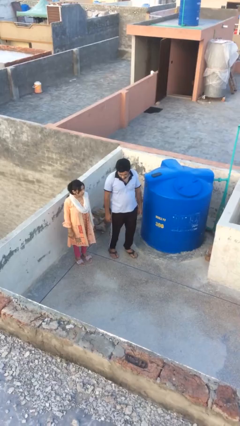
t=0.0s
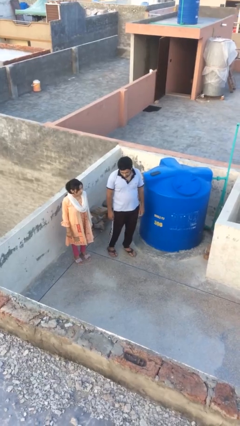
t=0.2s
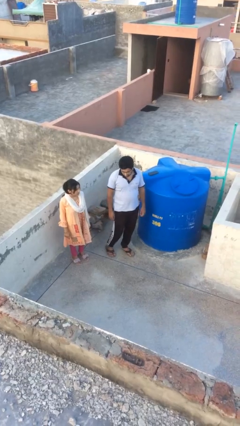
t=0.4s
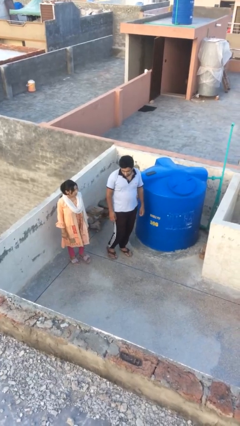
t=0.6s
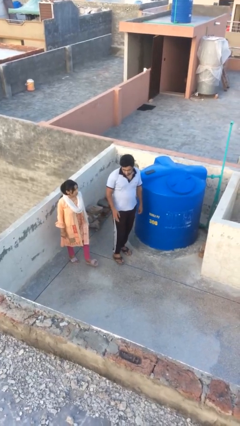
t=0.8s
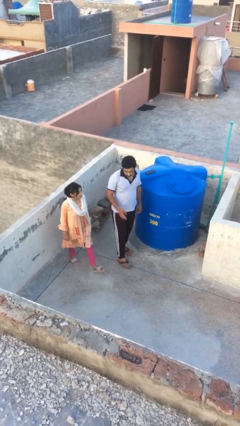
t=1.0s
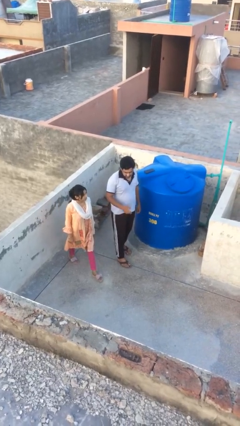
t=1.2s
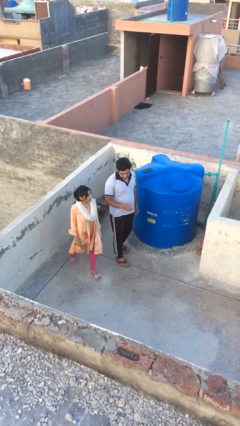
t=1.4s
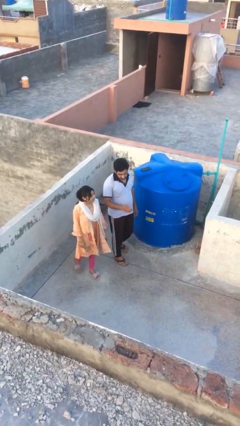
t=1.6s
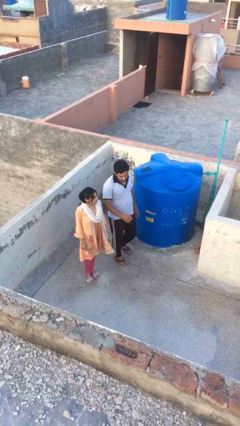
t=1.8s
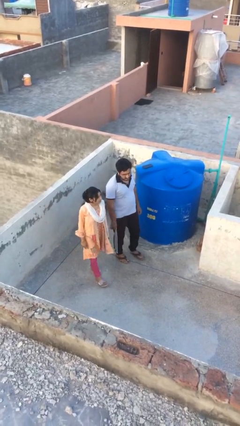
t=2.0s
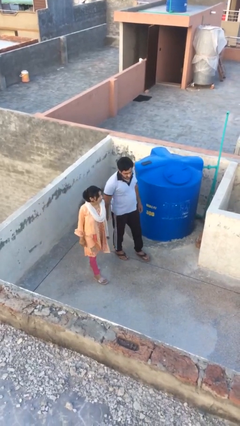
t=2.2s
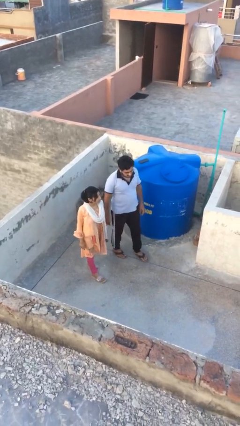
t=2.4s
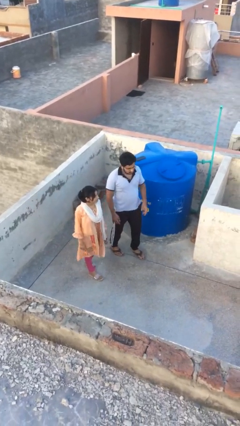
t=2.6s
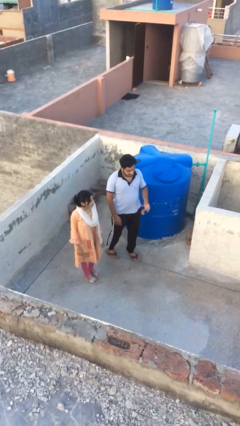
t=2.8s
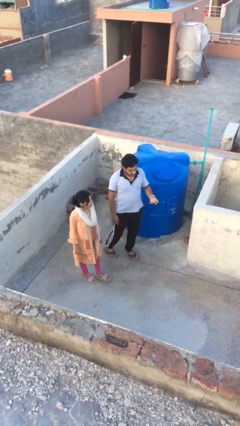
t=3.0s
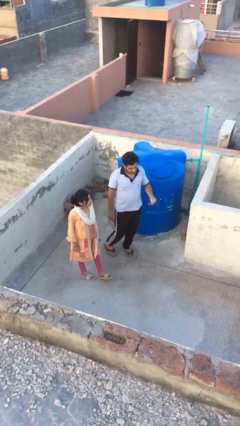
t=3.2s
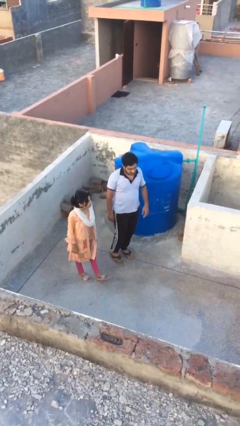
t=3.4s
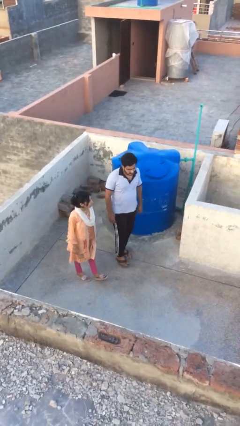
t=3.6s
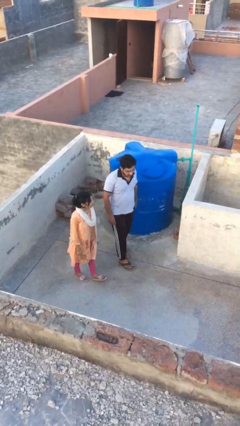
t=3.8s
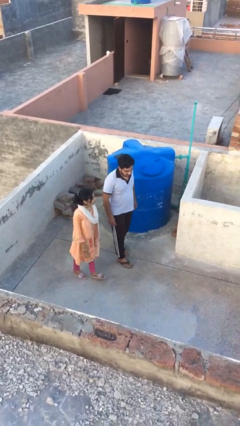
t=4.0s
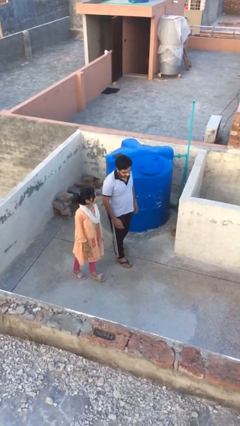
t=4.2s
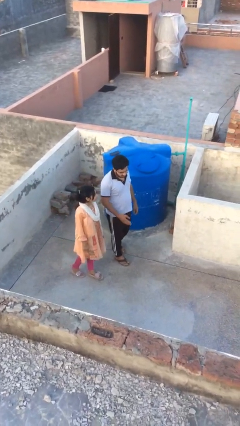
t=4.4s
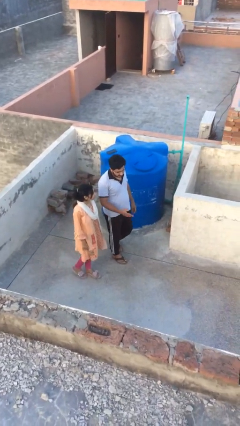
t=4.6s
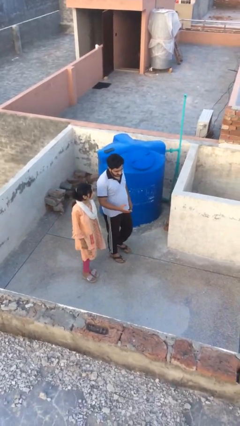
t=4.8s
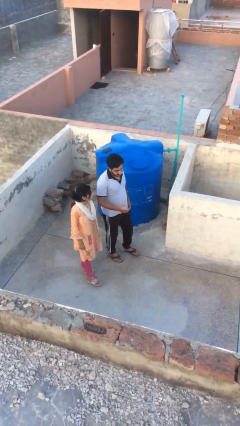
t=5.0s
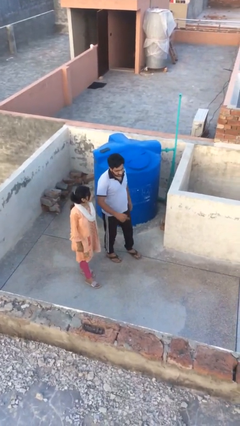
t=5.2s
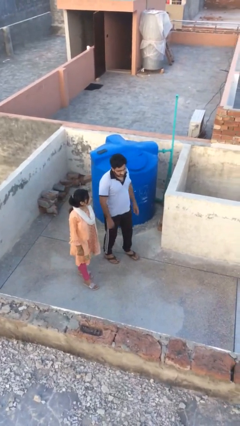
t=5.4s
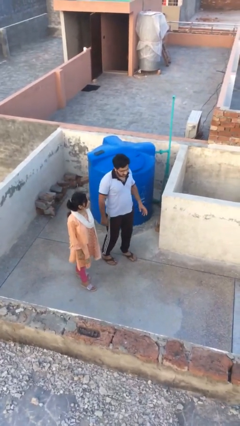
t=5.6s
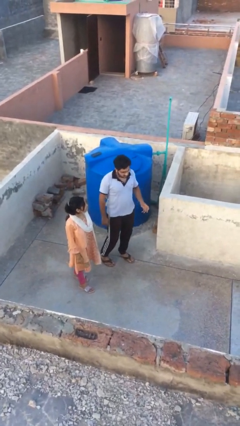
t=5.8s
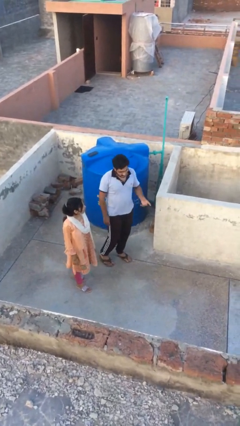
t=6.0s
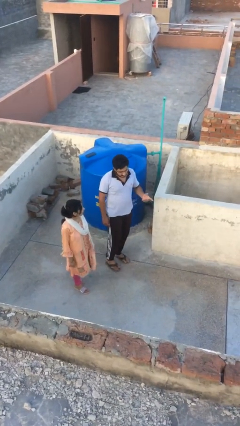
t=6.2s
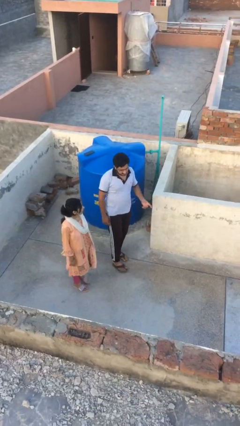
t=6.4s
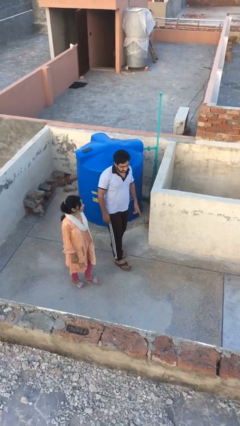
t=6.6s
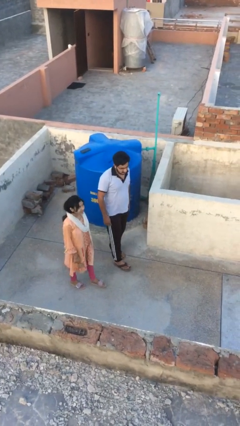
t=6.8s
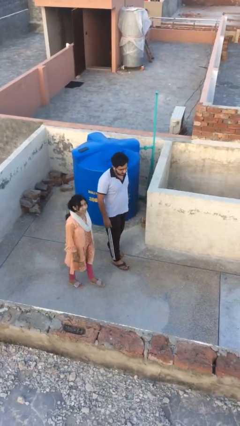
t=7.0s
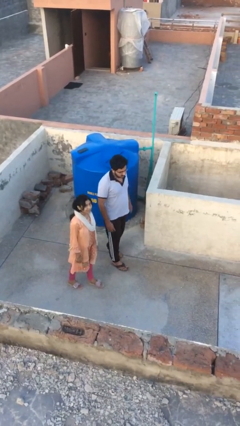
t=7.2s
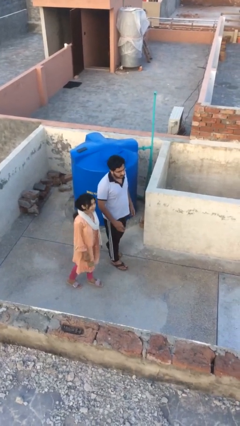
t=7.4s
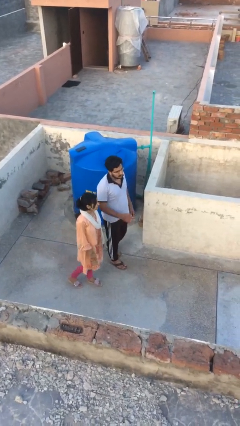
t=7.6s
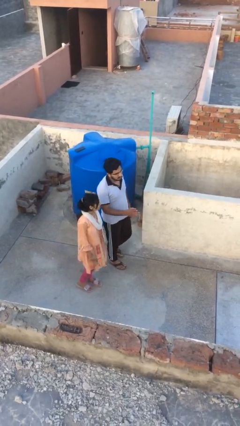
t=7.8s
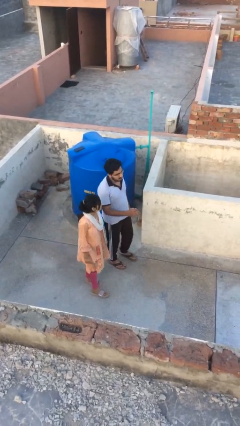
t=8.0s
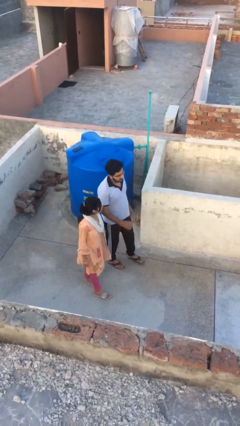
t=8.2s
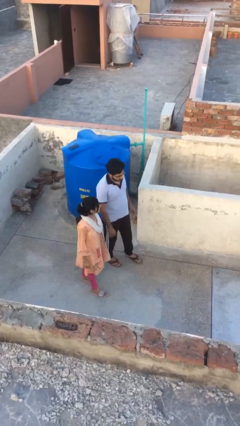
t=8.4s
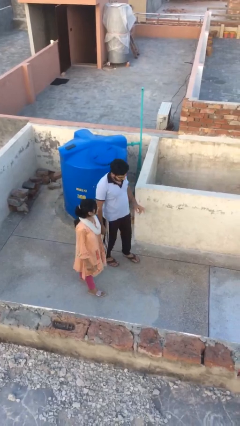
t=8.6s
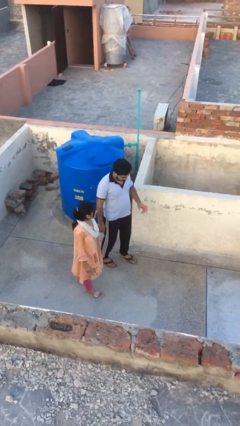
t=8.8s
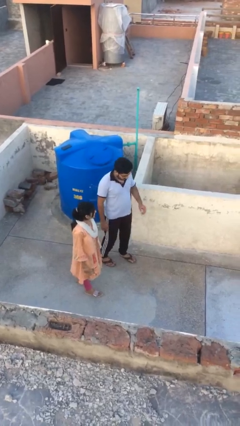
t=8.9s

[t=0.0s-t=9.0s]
person talks to person

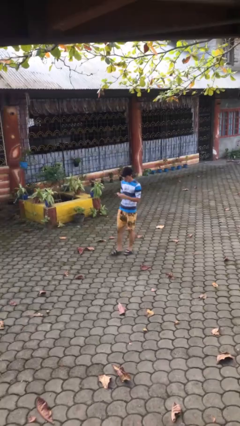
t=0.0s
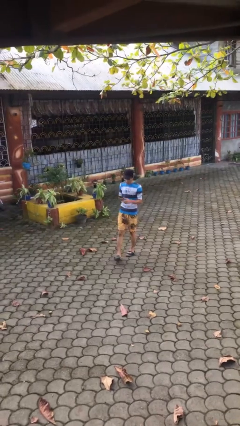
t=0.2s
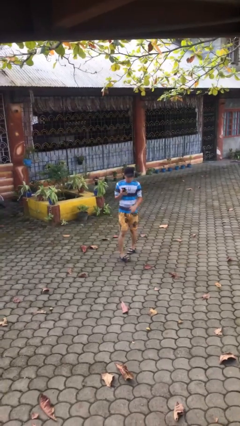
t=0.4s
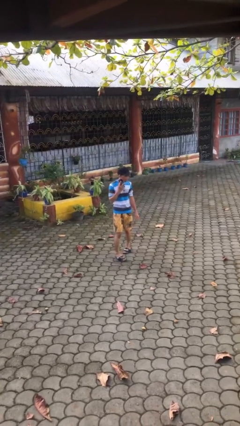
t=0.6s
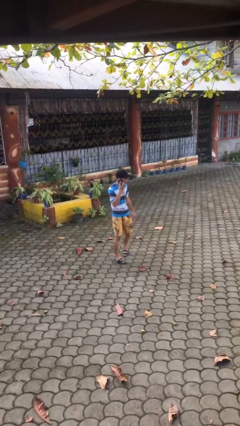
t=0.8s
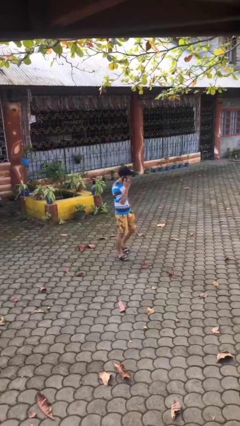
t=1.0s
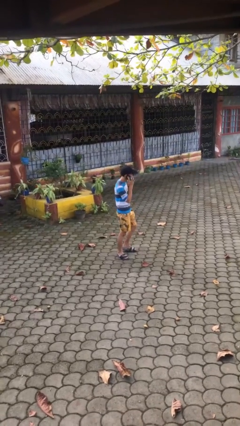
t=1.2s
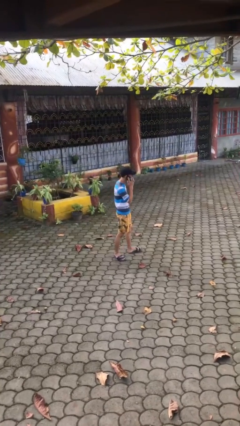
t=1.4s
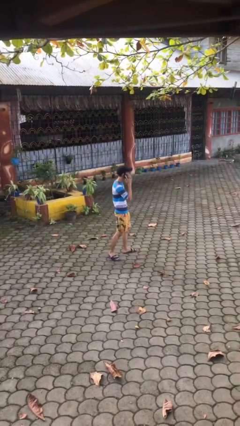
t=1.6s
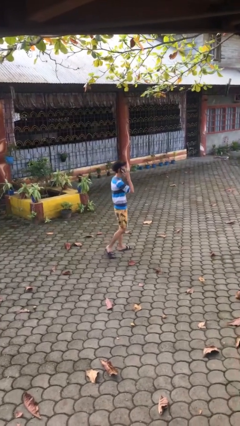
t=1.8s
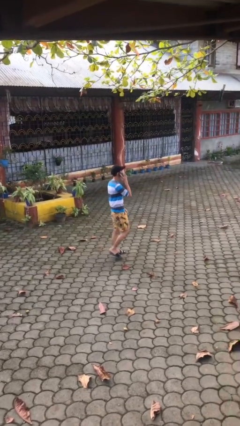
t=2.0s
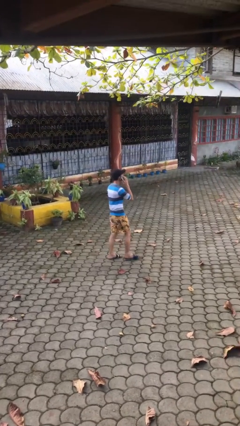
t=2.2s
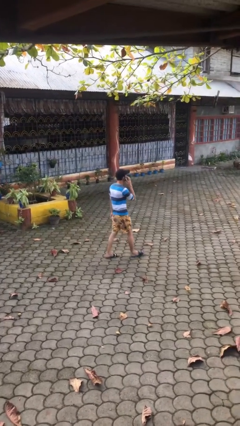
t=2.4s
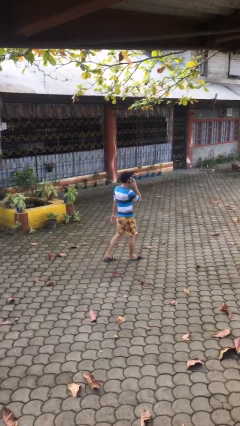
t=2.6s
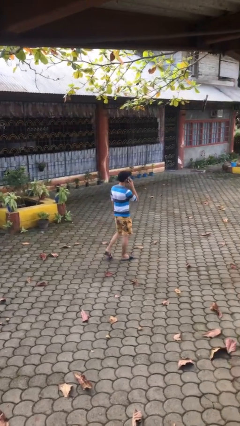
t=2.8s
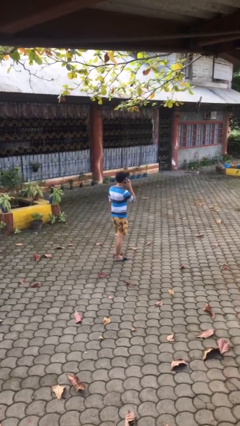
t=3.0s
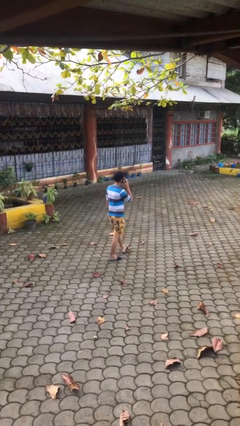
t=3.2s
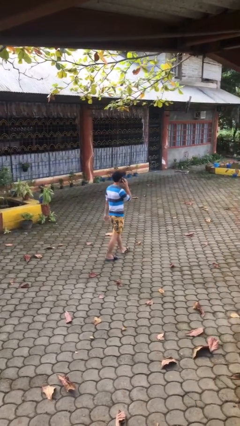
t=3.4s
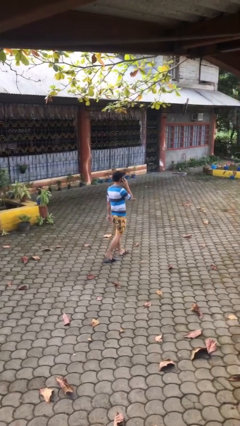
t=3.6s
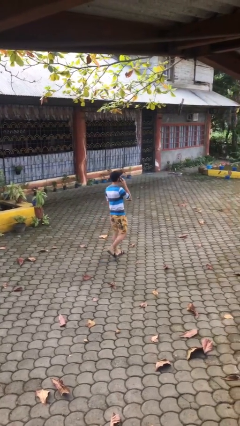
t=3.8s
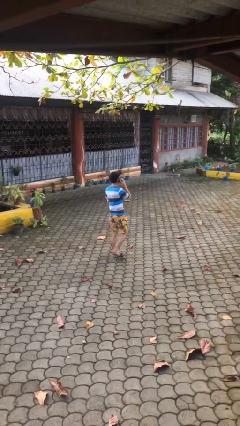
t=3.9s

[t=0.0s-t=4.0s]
person talks on phone

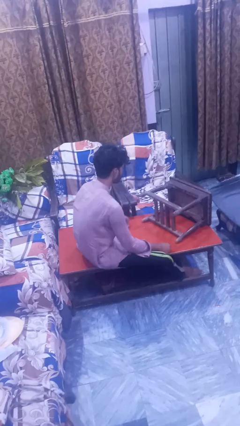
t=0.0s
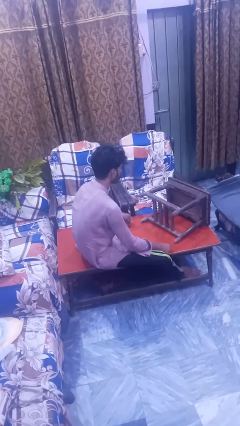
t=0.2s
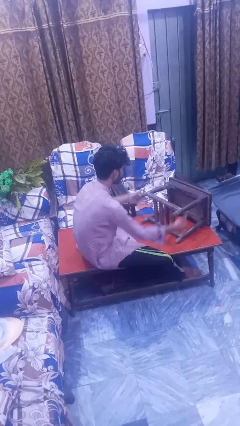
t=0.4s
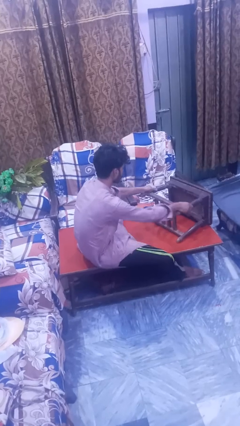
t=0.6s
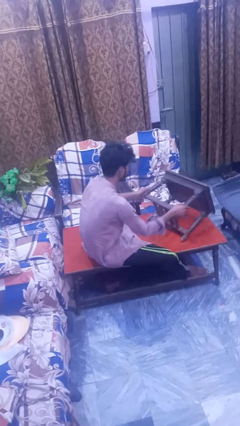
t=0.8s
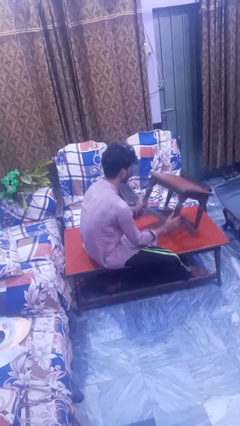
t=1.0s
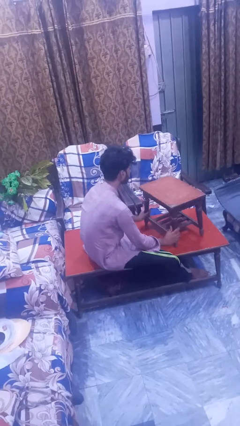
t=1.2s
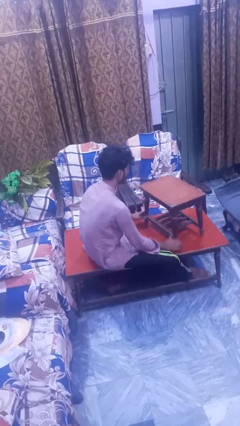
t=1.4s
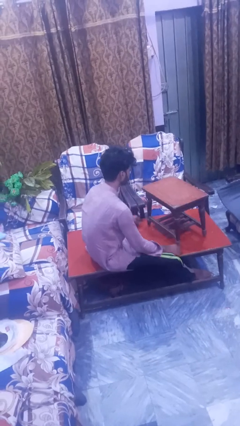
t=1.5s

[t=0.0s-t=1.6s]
person sets upright furniture

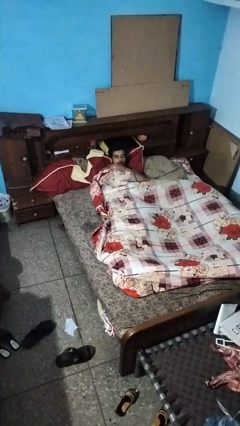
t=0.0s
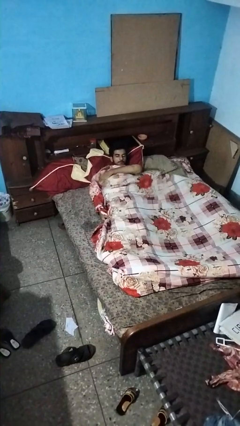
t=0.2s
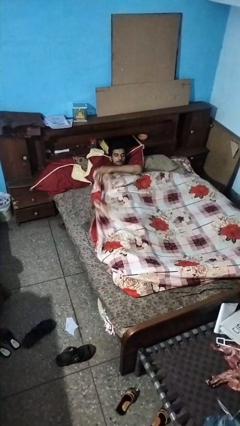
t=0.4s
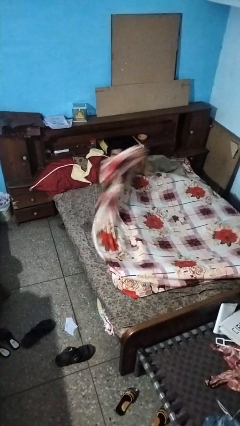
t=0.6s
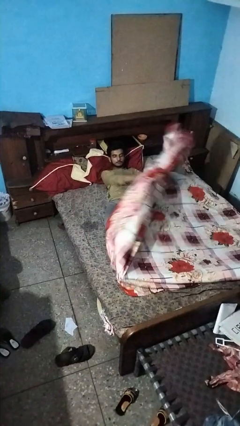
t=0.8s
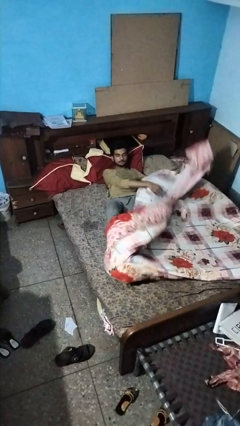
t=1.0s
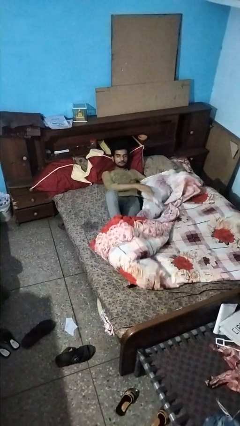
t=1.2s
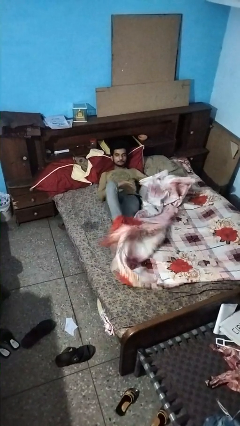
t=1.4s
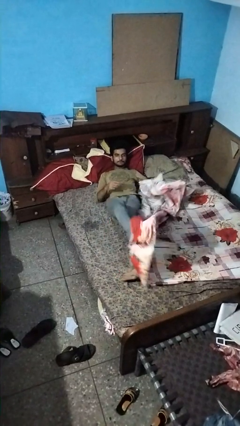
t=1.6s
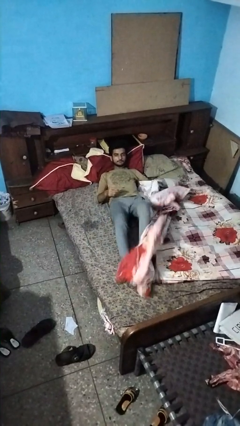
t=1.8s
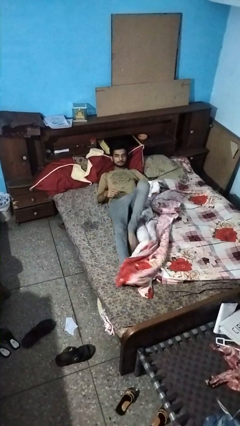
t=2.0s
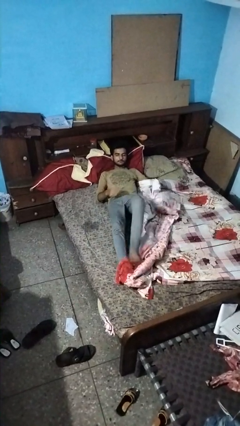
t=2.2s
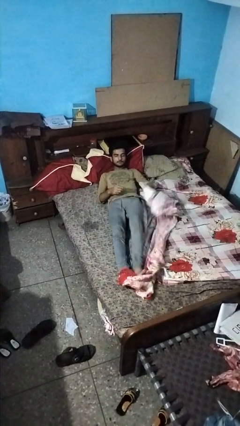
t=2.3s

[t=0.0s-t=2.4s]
person uncovers with bedsheets

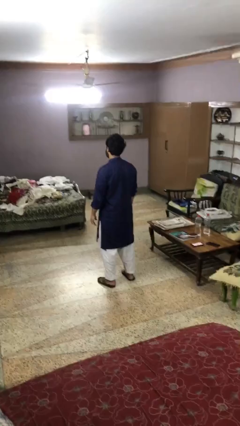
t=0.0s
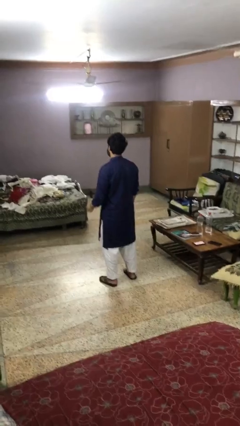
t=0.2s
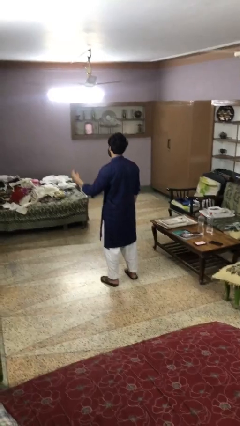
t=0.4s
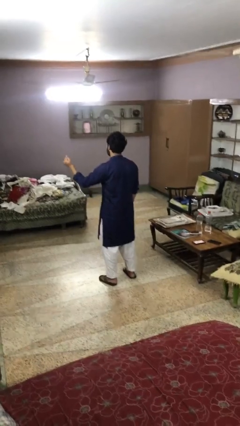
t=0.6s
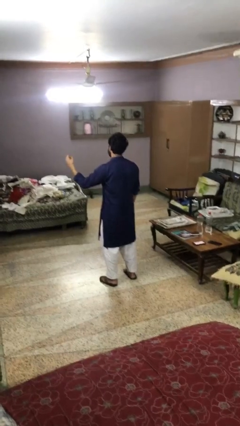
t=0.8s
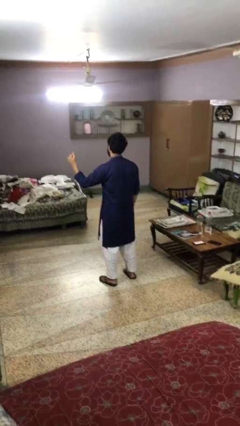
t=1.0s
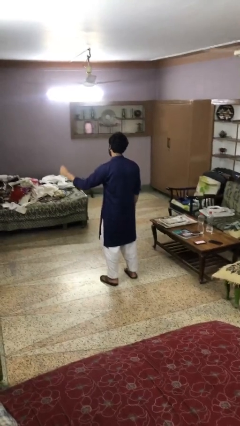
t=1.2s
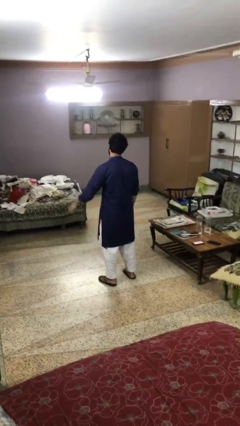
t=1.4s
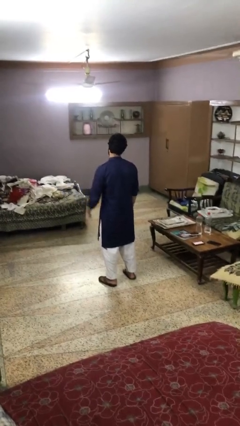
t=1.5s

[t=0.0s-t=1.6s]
person snaps fingers
